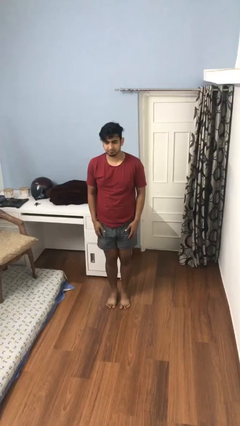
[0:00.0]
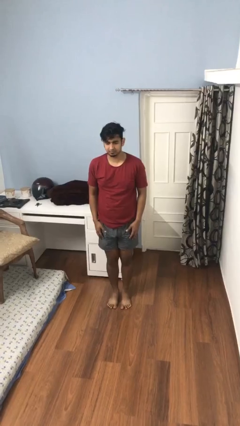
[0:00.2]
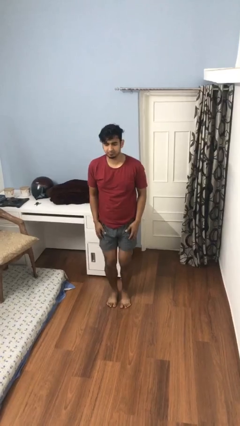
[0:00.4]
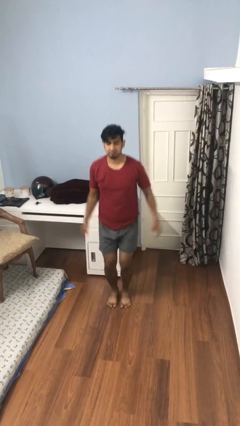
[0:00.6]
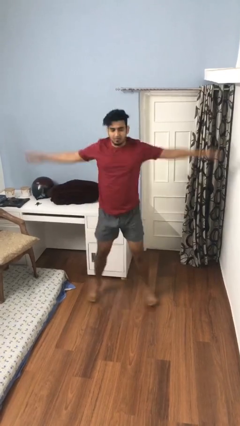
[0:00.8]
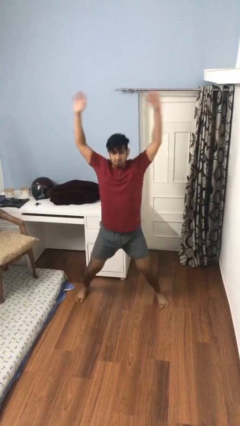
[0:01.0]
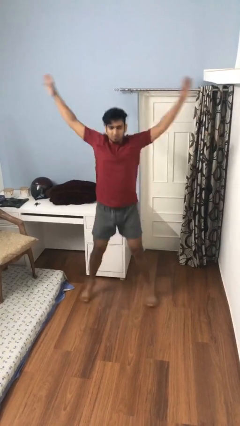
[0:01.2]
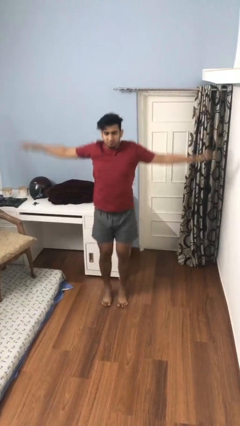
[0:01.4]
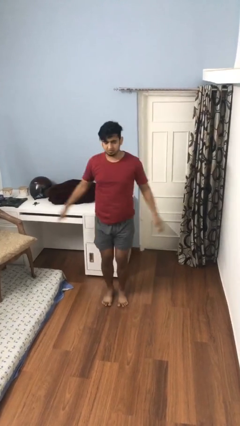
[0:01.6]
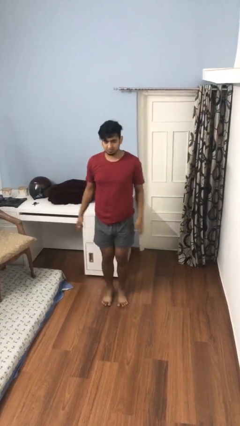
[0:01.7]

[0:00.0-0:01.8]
person exercises with jumping jacks

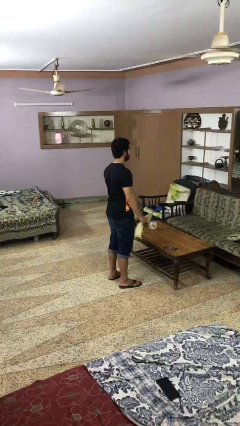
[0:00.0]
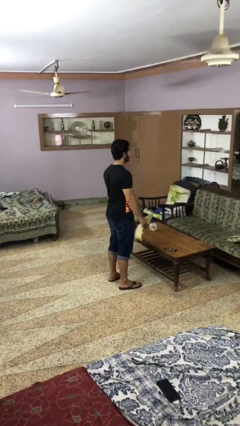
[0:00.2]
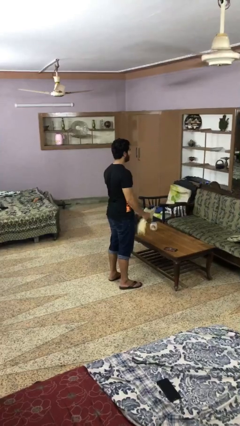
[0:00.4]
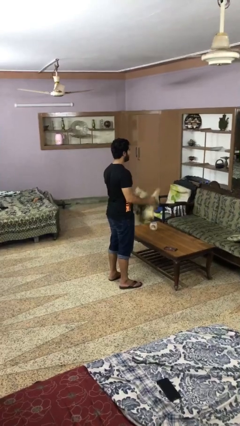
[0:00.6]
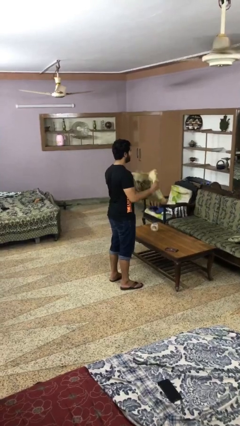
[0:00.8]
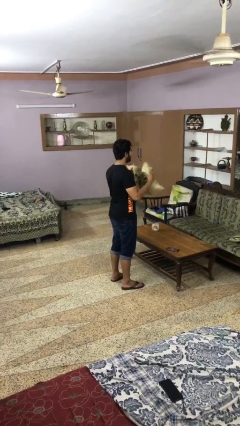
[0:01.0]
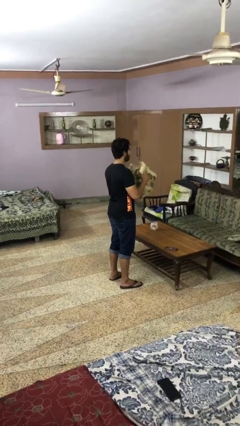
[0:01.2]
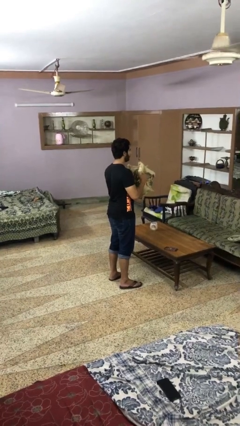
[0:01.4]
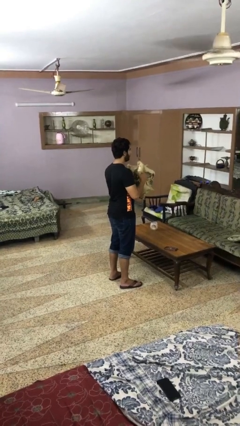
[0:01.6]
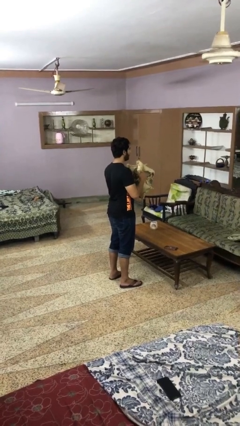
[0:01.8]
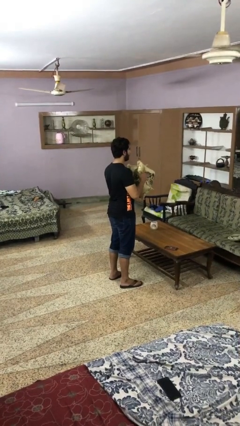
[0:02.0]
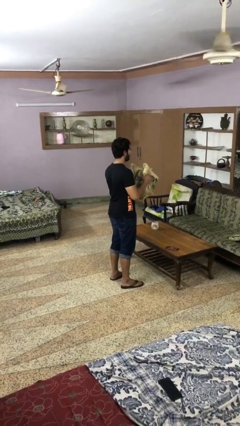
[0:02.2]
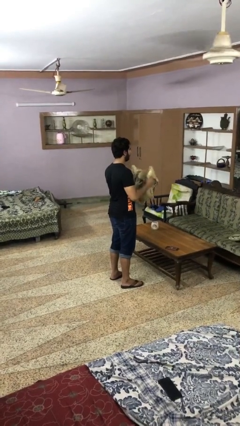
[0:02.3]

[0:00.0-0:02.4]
person squeezes object

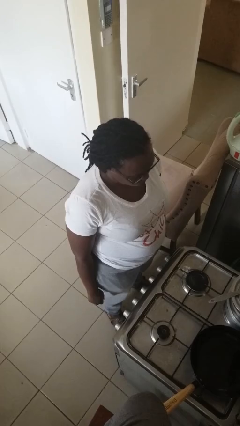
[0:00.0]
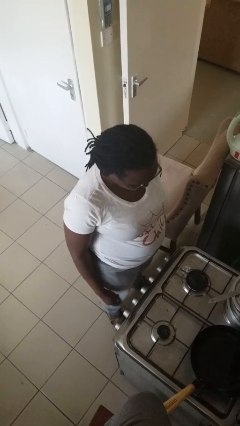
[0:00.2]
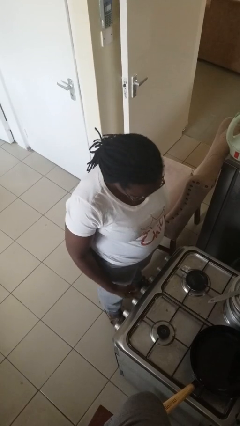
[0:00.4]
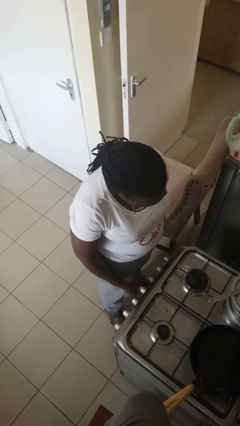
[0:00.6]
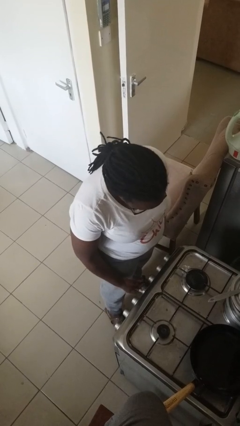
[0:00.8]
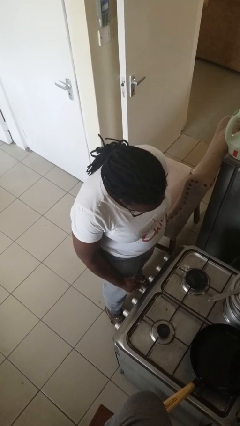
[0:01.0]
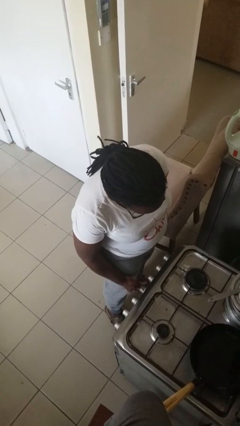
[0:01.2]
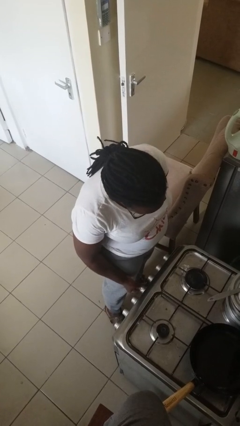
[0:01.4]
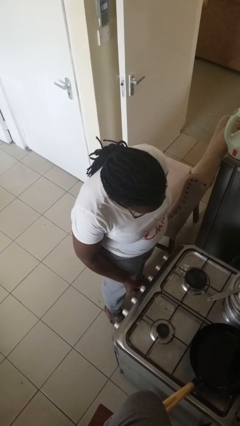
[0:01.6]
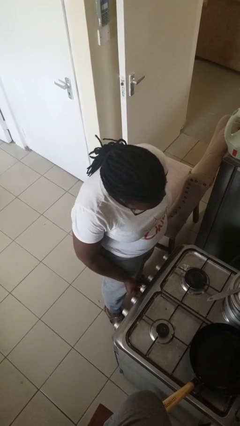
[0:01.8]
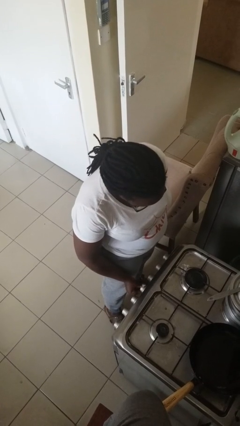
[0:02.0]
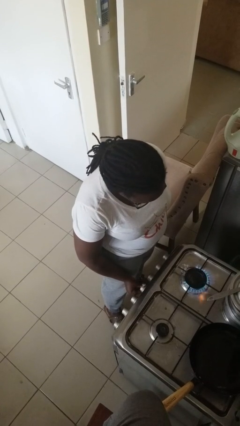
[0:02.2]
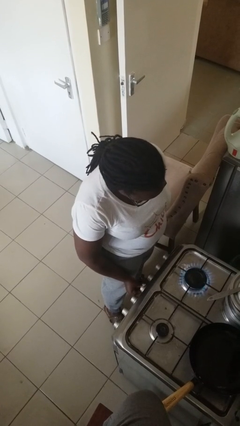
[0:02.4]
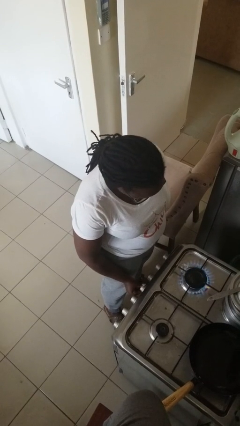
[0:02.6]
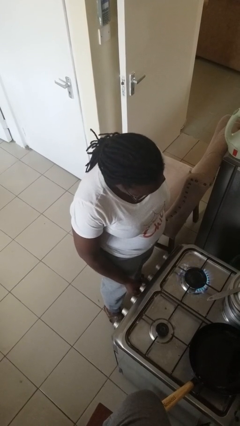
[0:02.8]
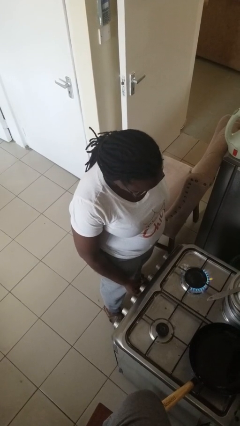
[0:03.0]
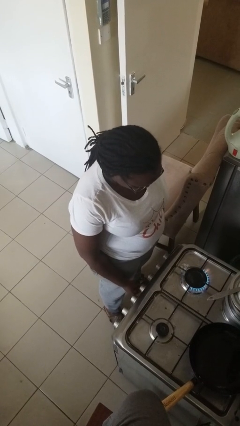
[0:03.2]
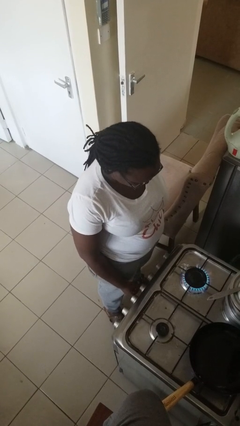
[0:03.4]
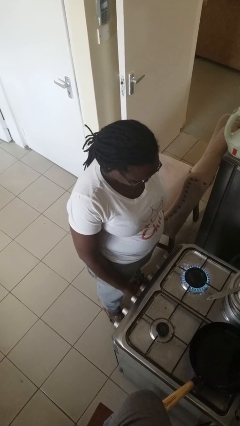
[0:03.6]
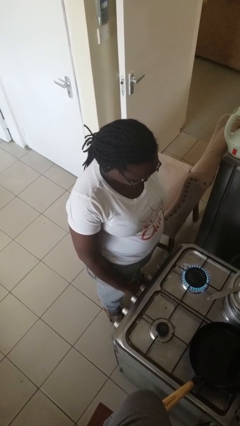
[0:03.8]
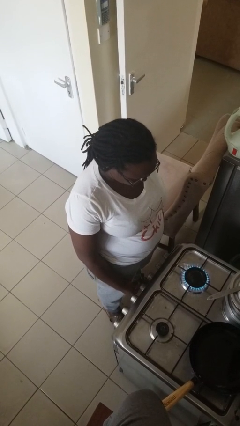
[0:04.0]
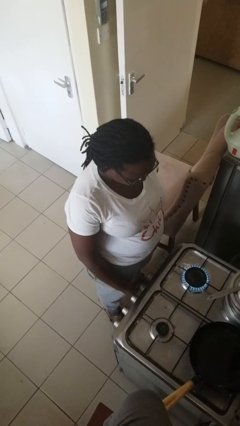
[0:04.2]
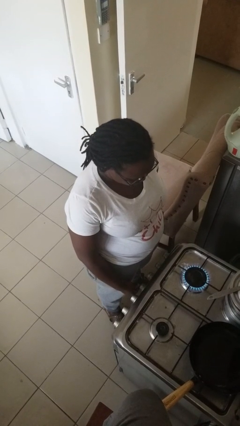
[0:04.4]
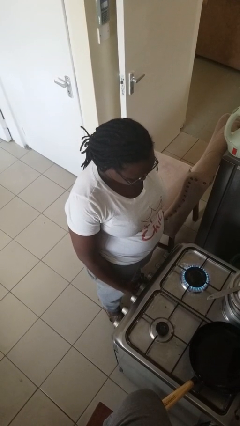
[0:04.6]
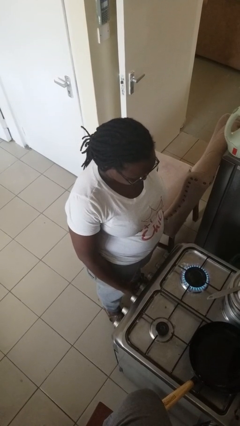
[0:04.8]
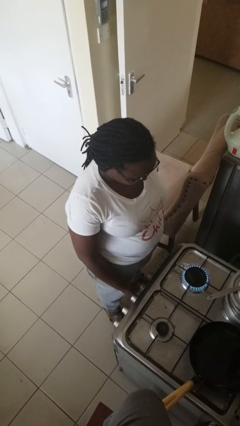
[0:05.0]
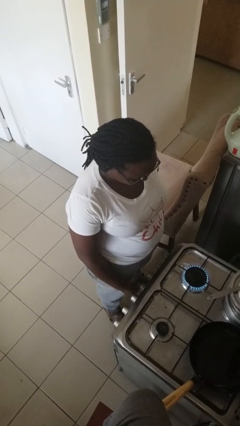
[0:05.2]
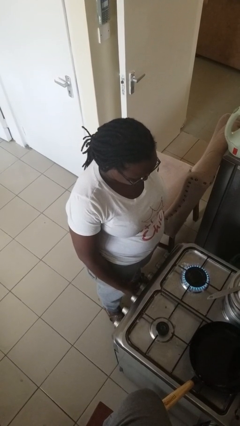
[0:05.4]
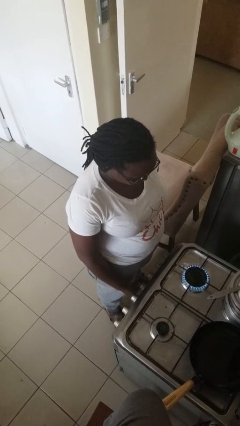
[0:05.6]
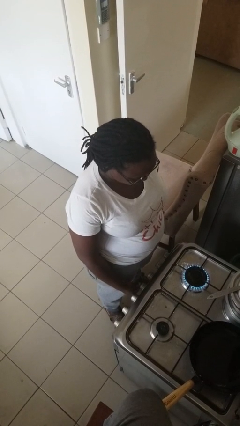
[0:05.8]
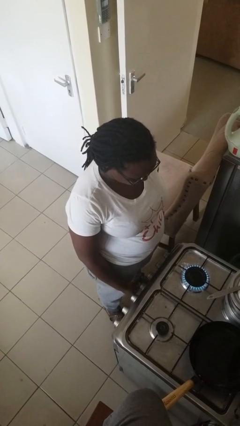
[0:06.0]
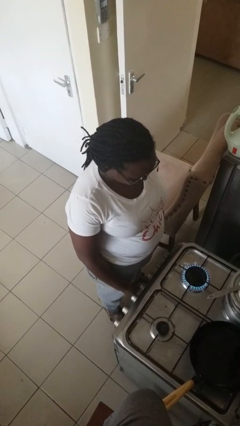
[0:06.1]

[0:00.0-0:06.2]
person turns on stovetop

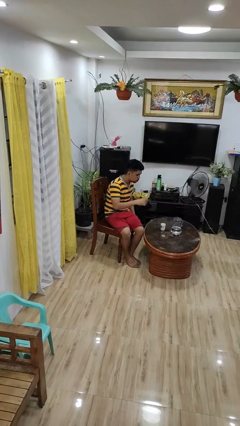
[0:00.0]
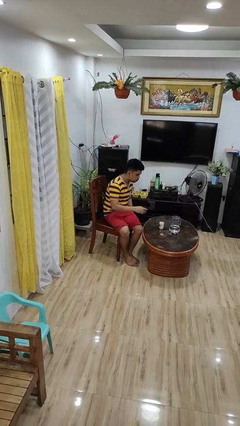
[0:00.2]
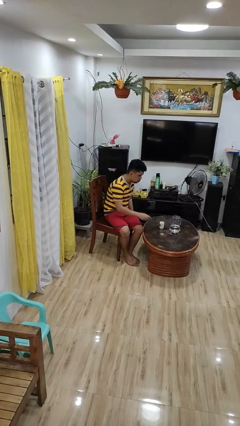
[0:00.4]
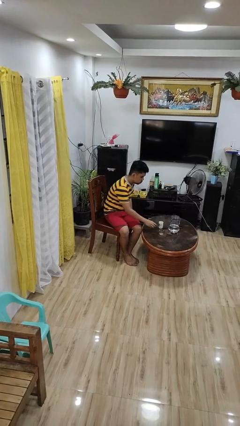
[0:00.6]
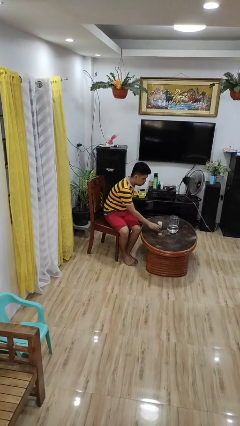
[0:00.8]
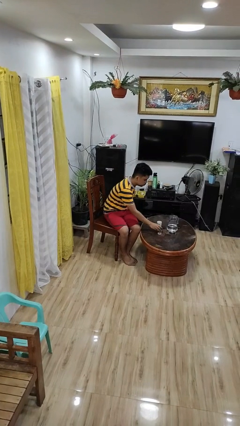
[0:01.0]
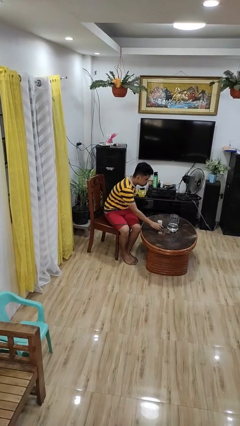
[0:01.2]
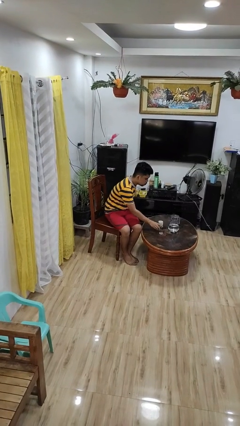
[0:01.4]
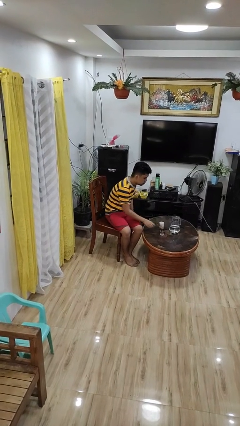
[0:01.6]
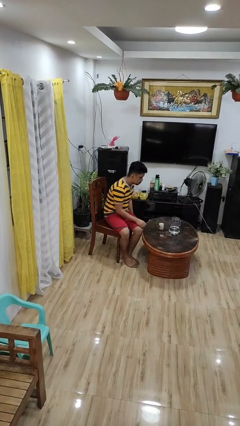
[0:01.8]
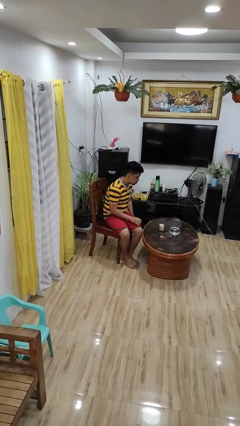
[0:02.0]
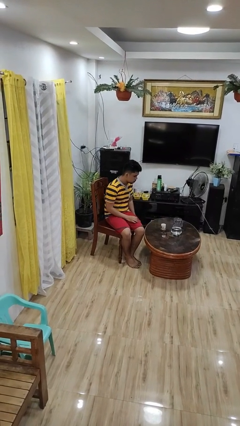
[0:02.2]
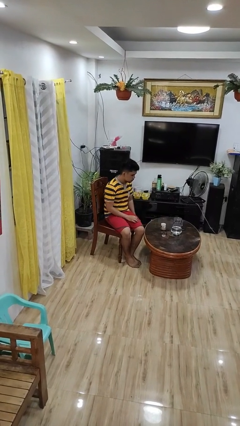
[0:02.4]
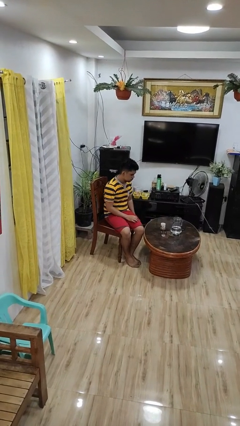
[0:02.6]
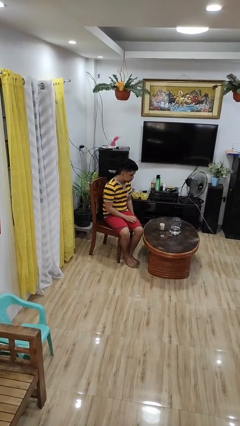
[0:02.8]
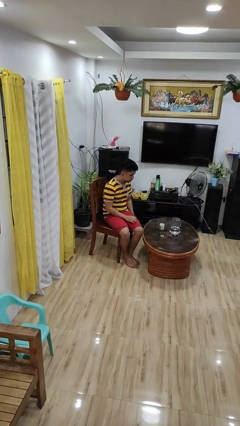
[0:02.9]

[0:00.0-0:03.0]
person puts down object on table

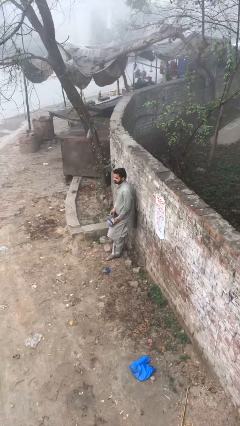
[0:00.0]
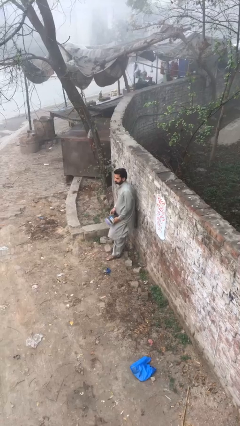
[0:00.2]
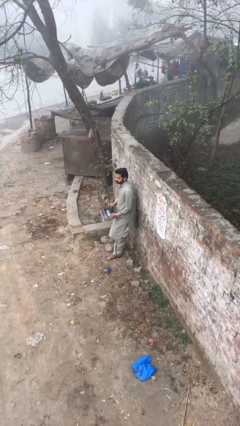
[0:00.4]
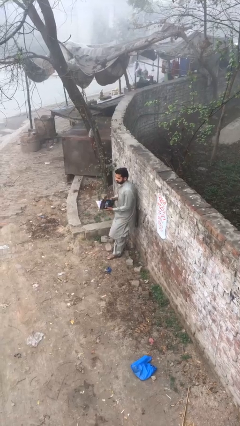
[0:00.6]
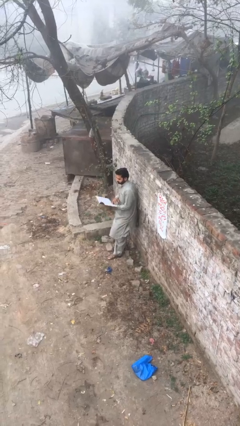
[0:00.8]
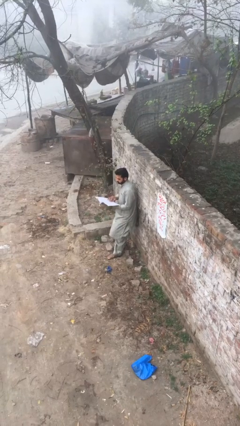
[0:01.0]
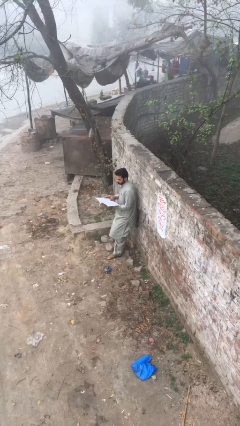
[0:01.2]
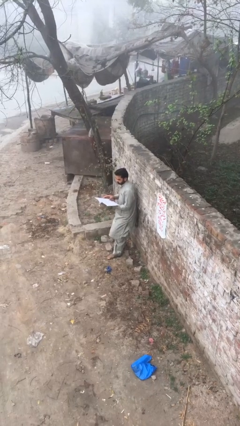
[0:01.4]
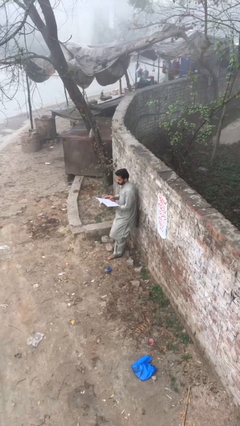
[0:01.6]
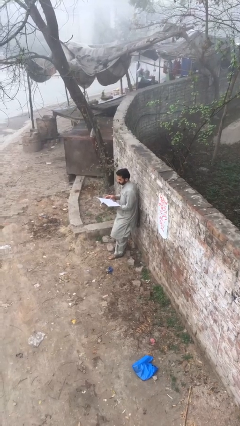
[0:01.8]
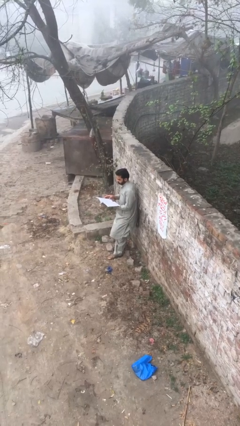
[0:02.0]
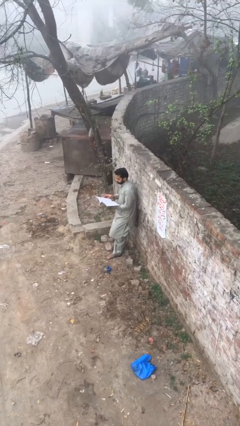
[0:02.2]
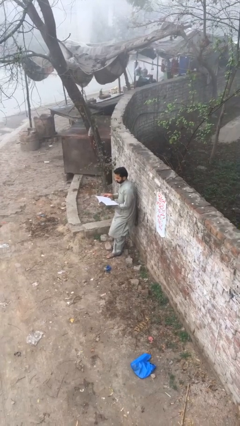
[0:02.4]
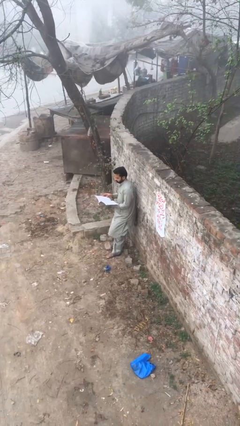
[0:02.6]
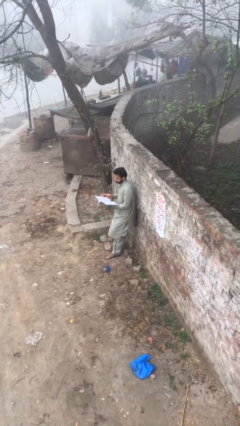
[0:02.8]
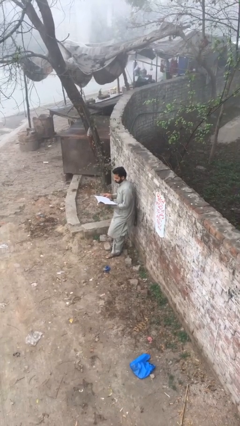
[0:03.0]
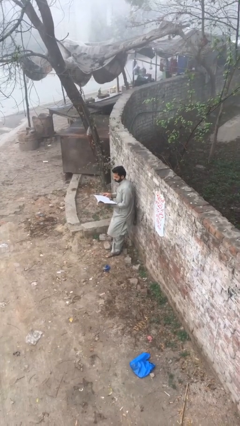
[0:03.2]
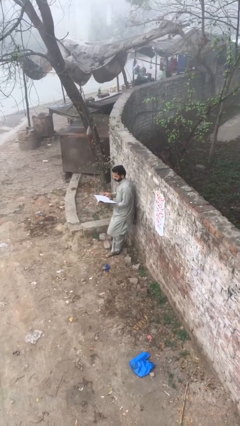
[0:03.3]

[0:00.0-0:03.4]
person reads document

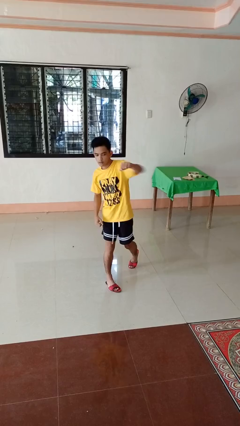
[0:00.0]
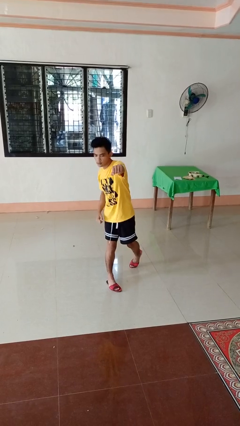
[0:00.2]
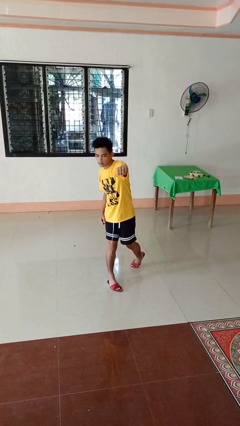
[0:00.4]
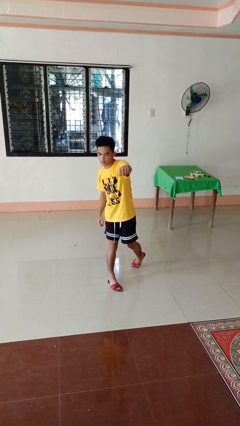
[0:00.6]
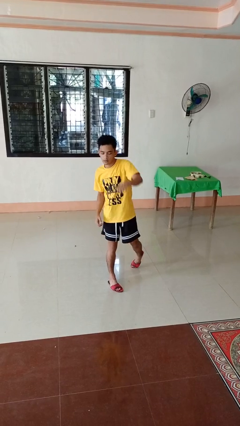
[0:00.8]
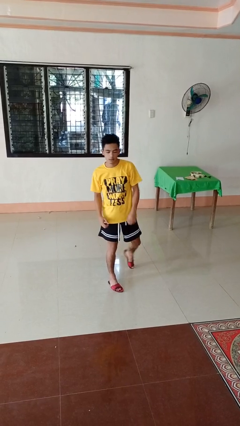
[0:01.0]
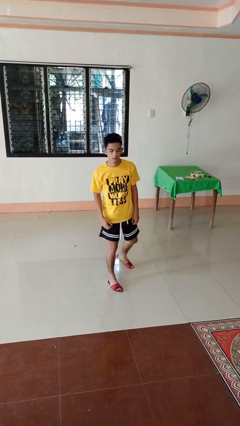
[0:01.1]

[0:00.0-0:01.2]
person punches
